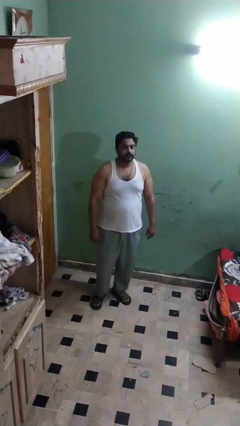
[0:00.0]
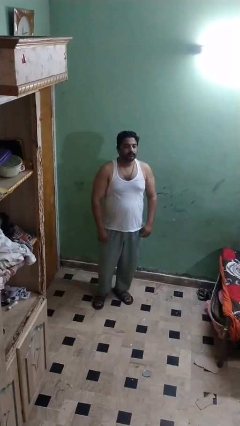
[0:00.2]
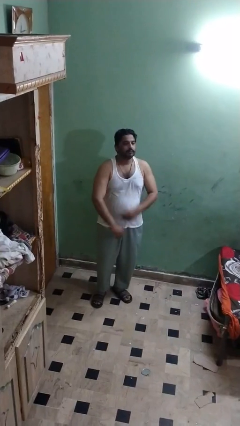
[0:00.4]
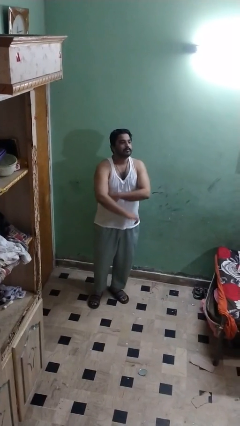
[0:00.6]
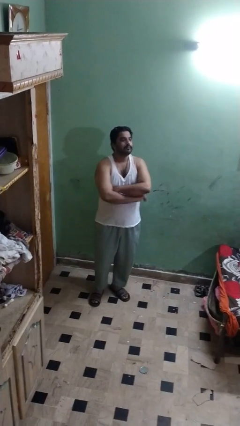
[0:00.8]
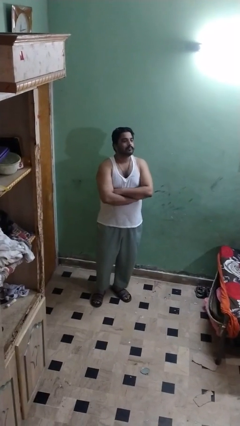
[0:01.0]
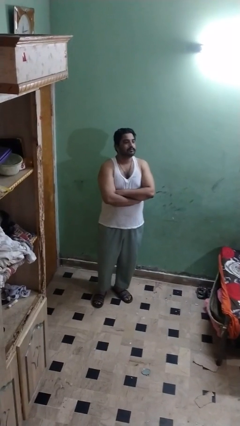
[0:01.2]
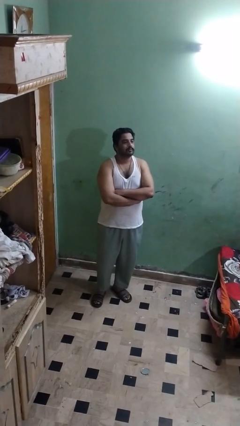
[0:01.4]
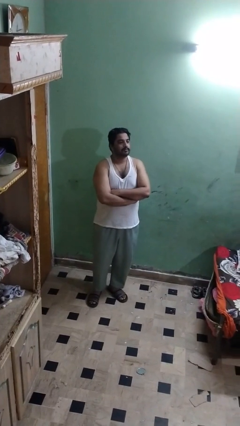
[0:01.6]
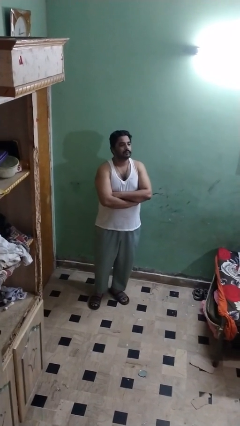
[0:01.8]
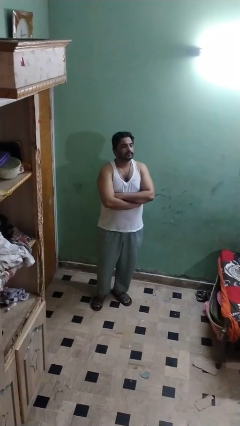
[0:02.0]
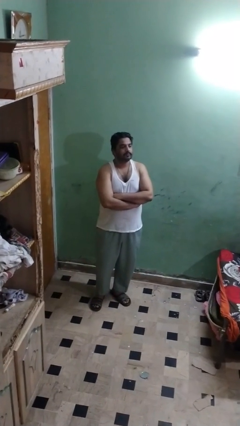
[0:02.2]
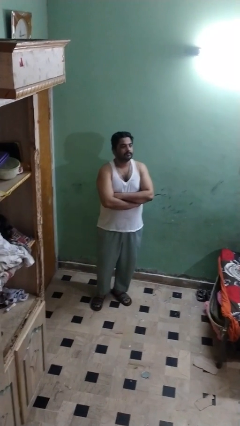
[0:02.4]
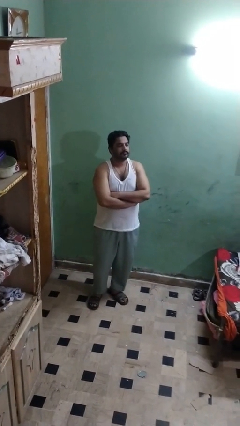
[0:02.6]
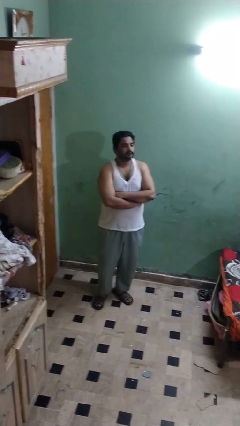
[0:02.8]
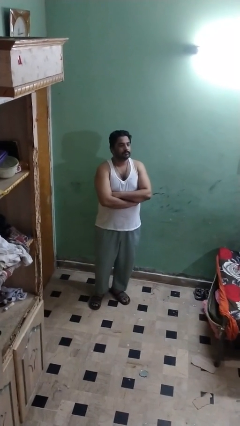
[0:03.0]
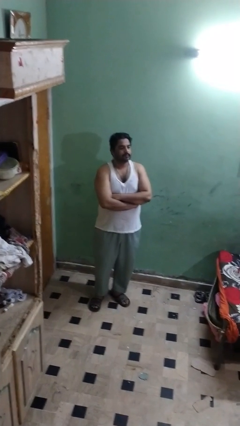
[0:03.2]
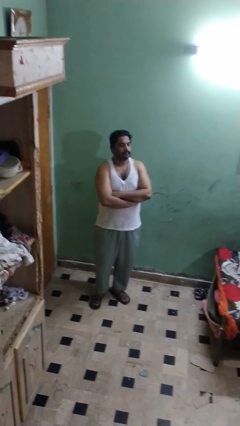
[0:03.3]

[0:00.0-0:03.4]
person crosses arms

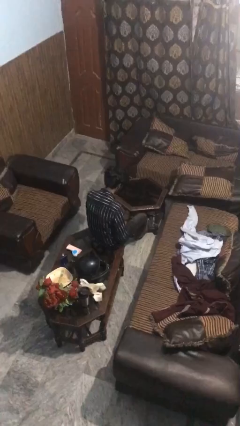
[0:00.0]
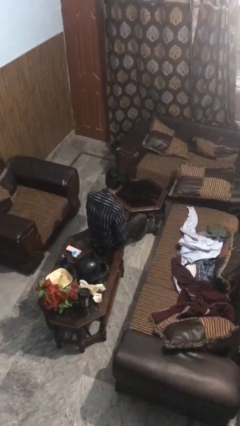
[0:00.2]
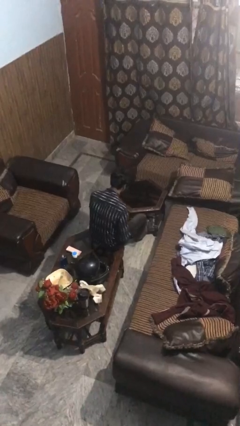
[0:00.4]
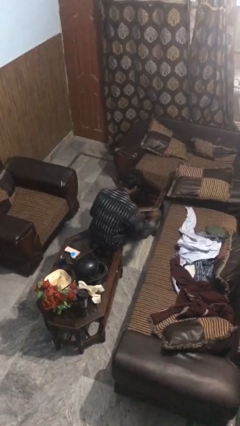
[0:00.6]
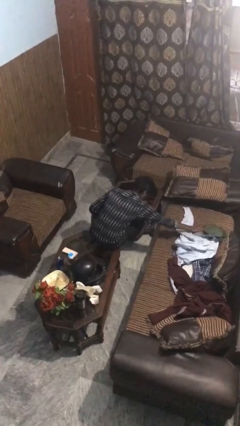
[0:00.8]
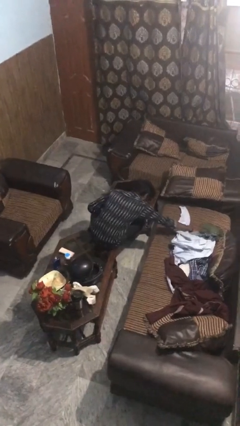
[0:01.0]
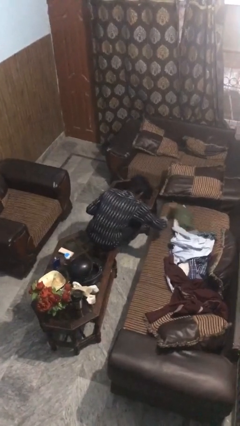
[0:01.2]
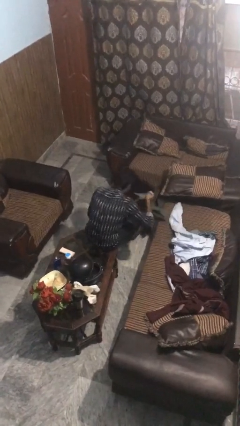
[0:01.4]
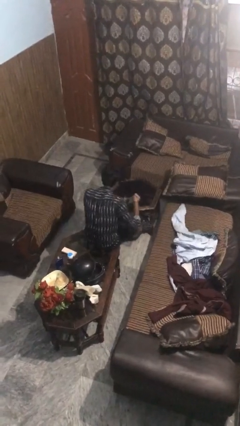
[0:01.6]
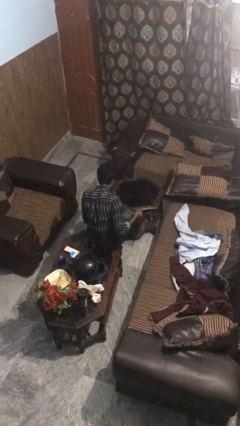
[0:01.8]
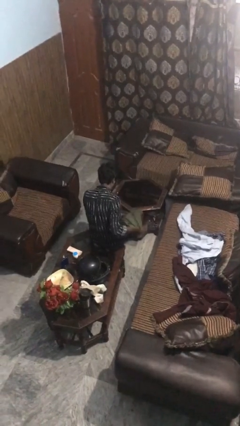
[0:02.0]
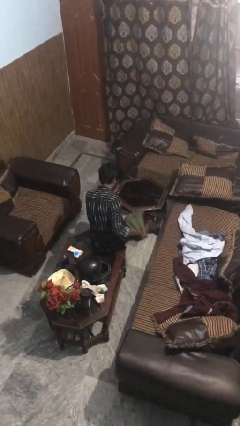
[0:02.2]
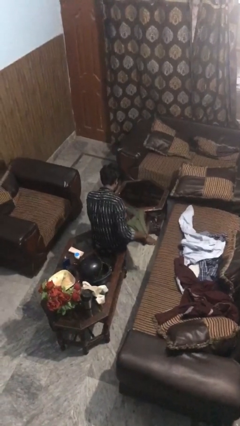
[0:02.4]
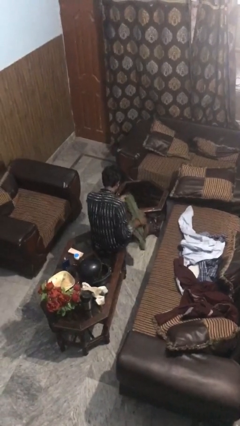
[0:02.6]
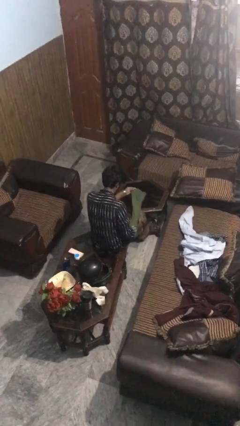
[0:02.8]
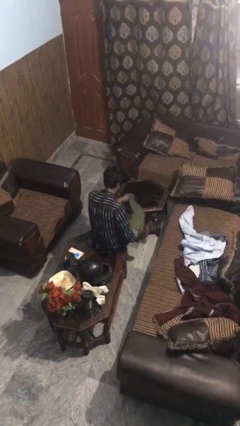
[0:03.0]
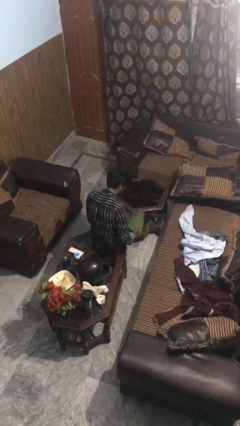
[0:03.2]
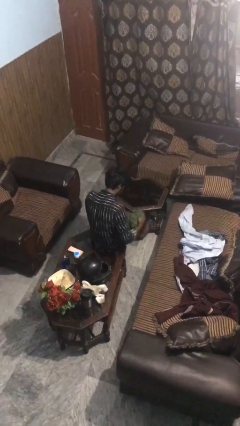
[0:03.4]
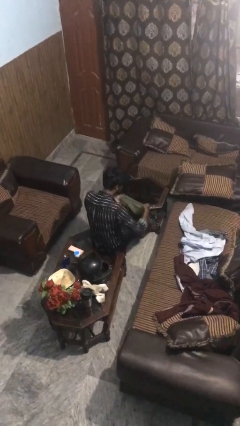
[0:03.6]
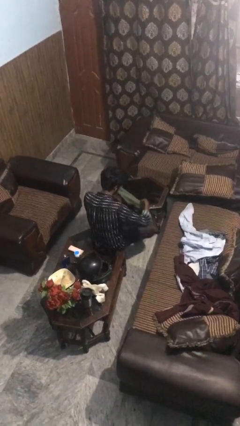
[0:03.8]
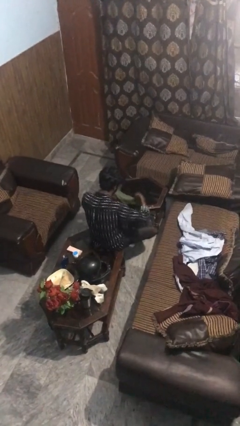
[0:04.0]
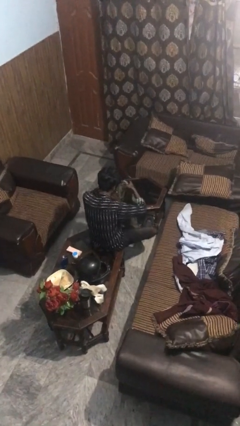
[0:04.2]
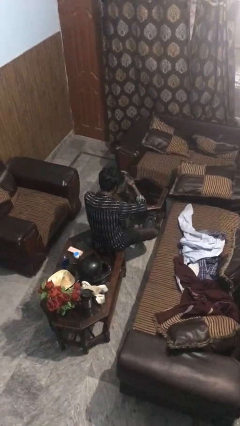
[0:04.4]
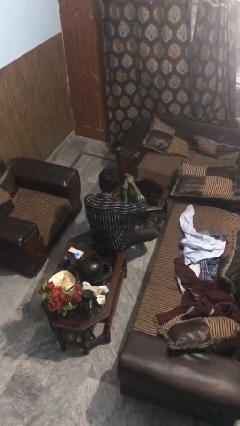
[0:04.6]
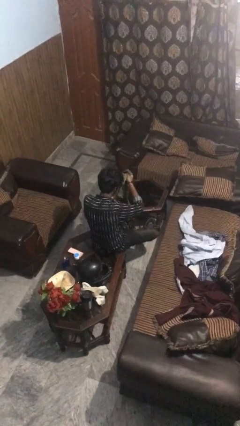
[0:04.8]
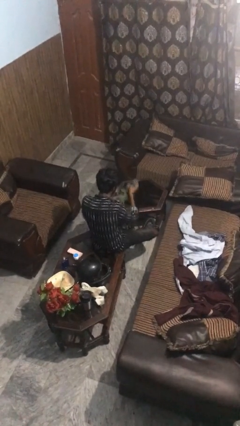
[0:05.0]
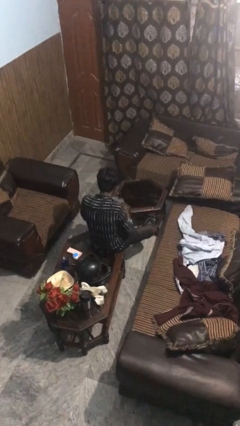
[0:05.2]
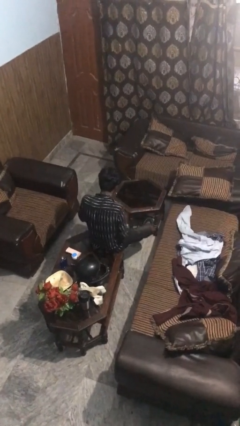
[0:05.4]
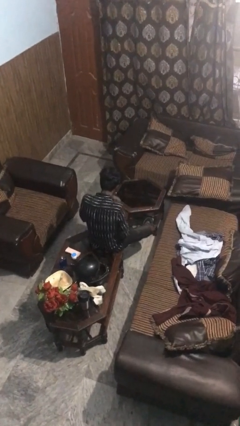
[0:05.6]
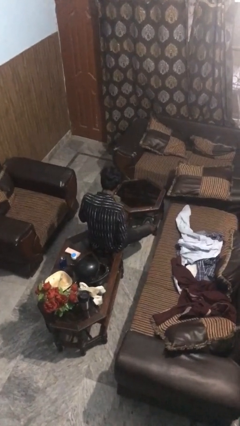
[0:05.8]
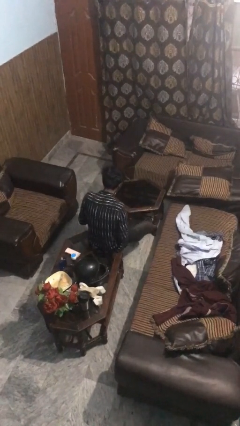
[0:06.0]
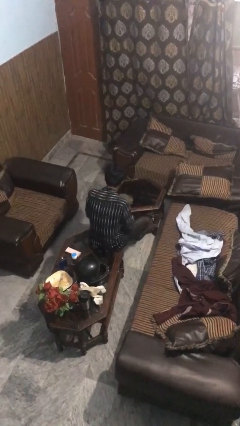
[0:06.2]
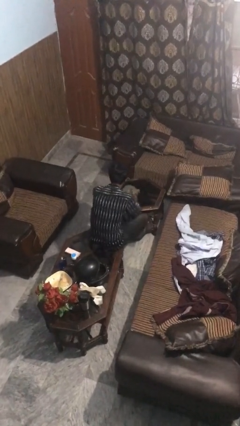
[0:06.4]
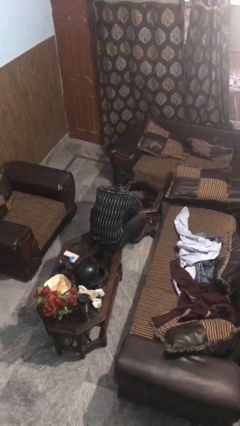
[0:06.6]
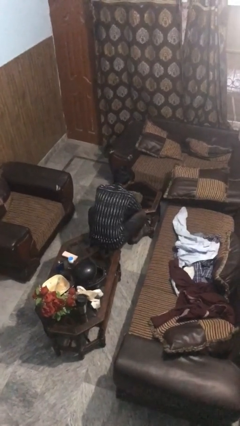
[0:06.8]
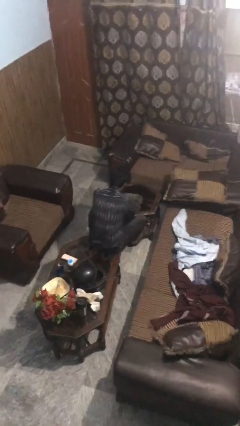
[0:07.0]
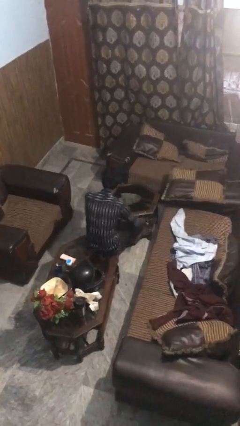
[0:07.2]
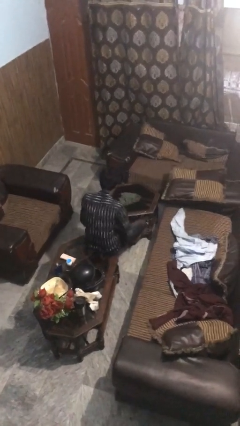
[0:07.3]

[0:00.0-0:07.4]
person folds shirt

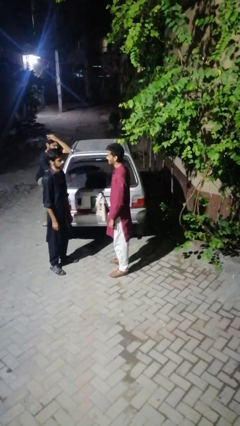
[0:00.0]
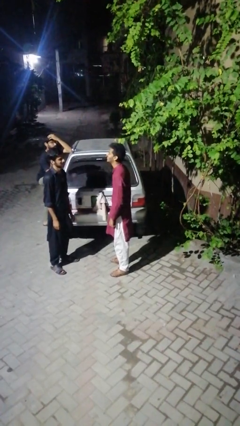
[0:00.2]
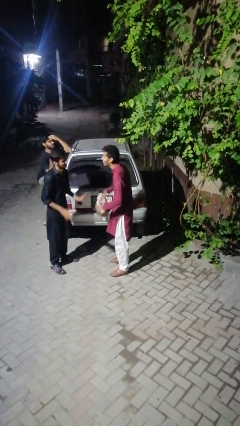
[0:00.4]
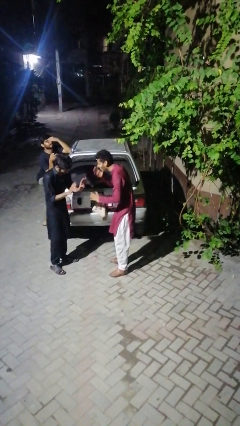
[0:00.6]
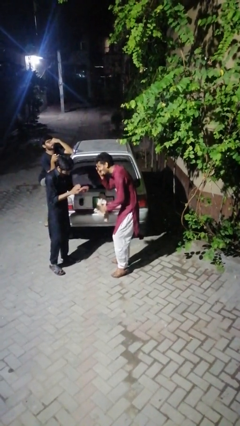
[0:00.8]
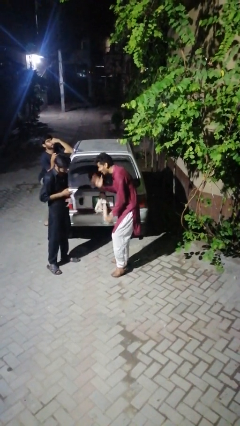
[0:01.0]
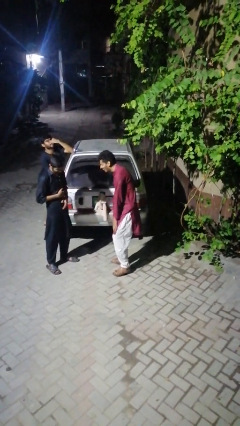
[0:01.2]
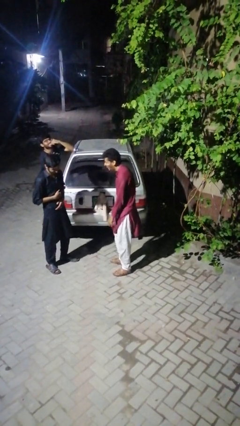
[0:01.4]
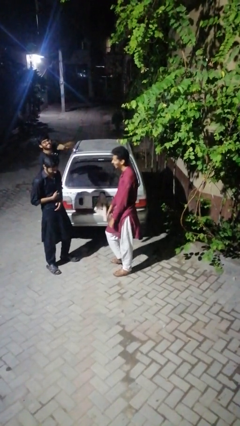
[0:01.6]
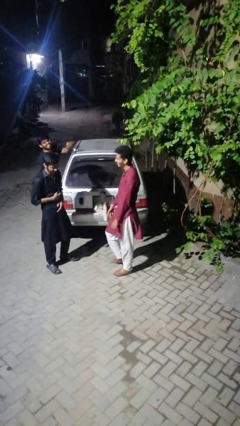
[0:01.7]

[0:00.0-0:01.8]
person laughs with person

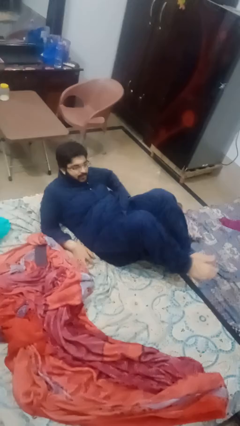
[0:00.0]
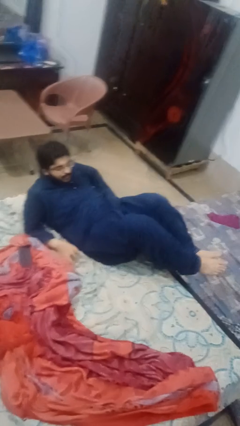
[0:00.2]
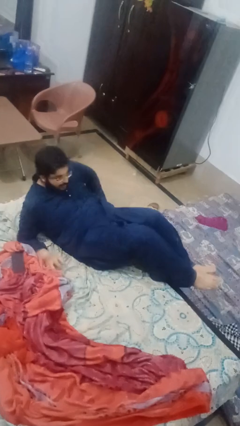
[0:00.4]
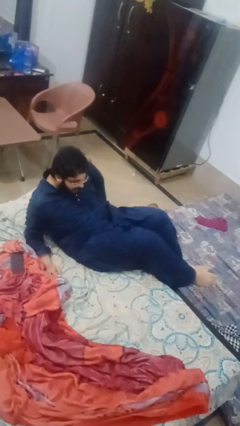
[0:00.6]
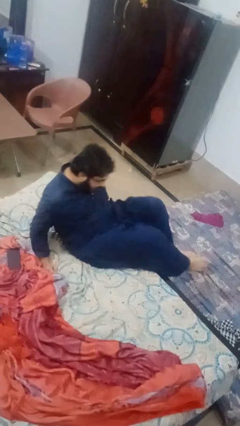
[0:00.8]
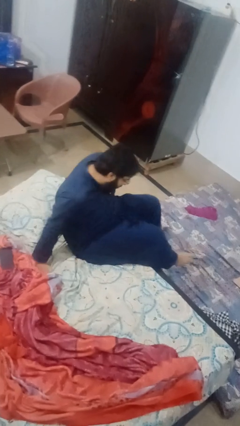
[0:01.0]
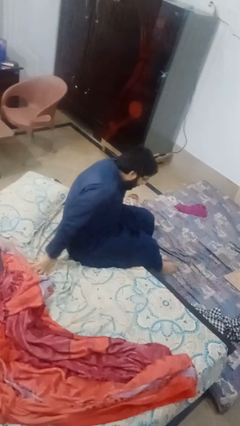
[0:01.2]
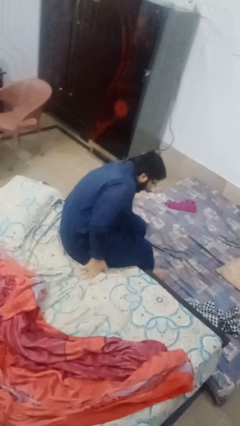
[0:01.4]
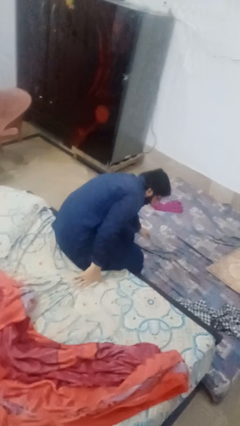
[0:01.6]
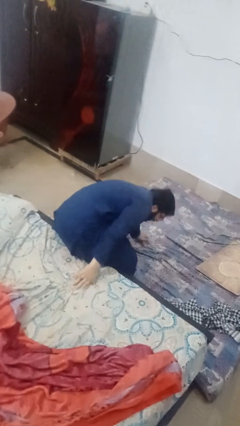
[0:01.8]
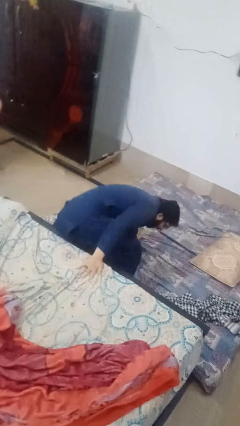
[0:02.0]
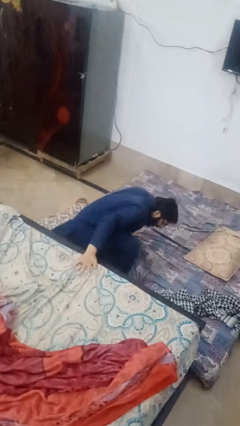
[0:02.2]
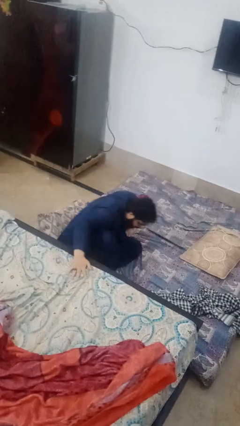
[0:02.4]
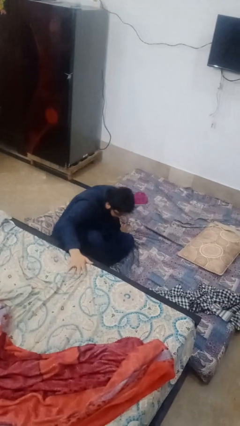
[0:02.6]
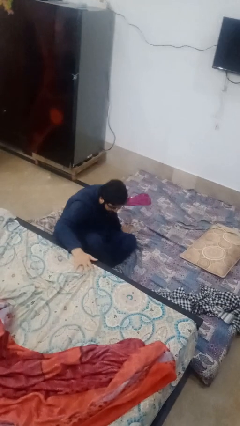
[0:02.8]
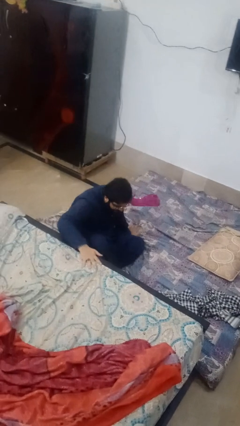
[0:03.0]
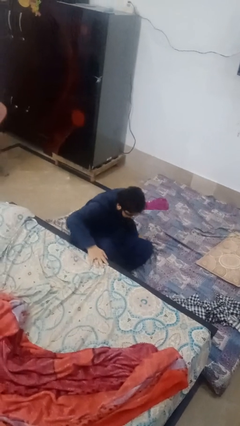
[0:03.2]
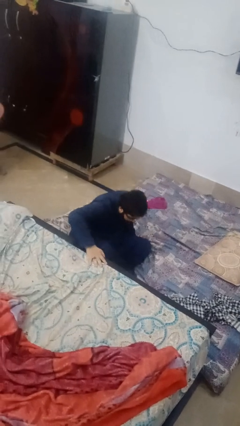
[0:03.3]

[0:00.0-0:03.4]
person falls from bed

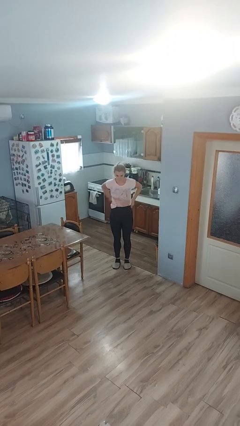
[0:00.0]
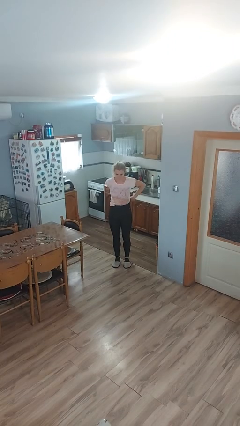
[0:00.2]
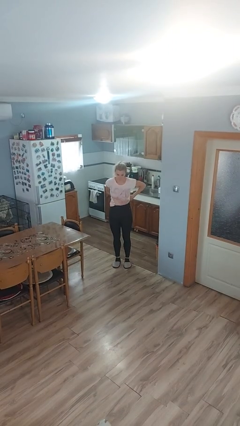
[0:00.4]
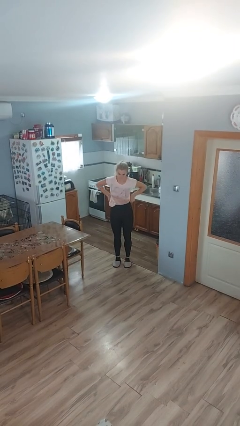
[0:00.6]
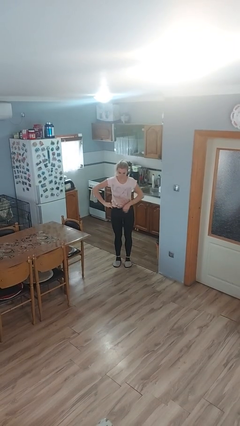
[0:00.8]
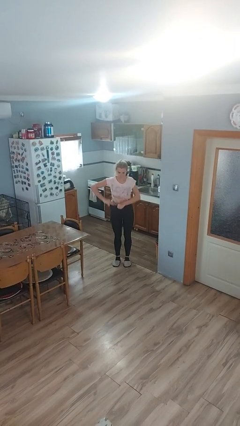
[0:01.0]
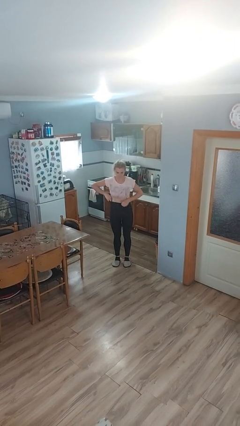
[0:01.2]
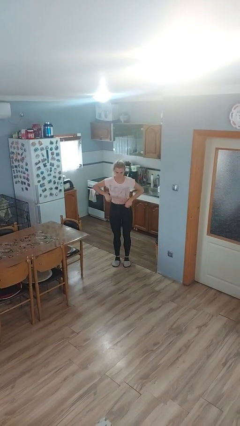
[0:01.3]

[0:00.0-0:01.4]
person tucks in shirt
